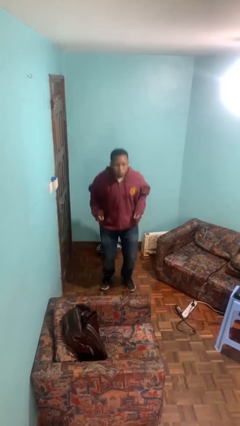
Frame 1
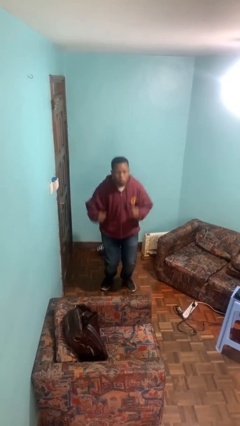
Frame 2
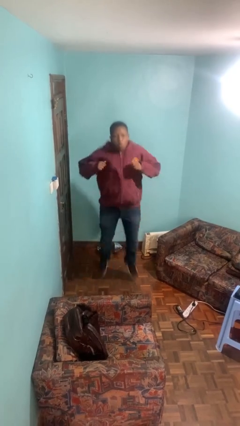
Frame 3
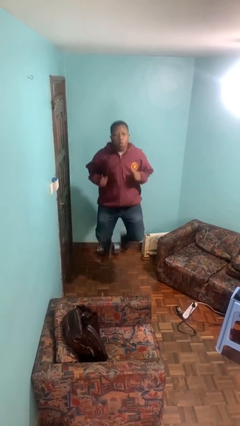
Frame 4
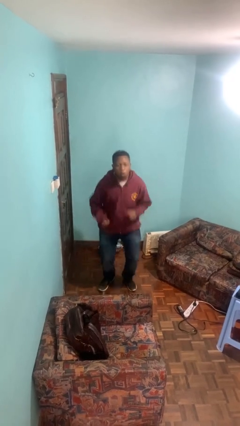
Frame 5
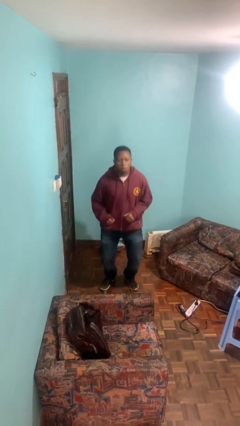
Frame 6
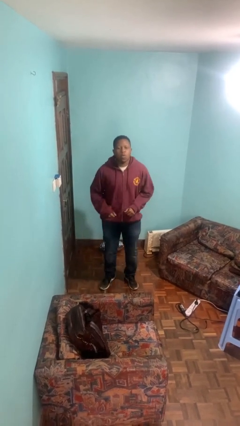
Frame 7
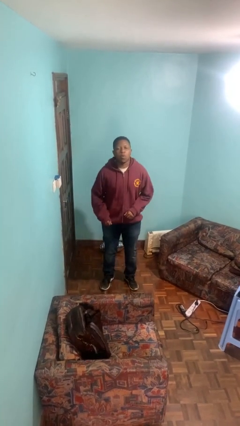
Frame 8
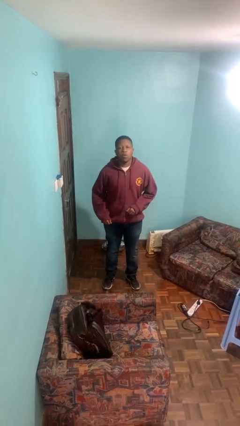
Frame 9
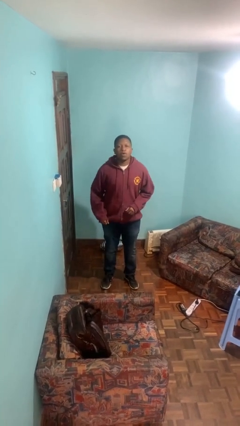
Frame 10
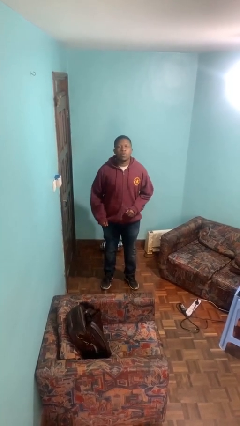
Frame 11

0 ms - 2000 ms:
person jumps

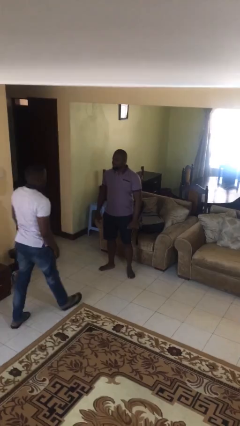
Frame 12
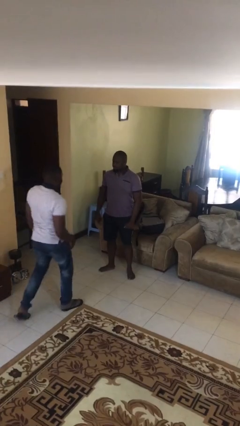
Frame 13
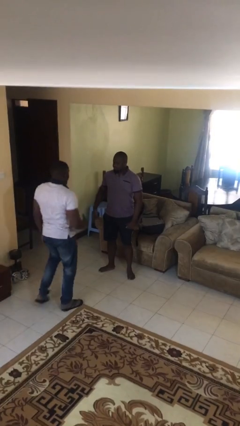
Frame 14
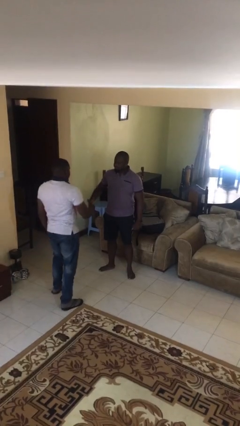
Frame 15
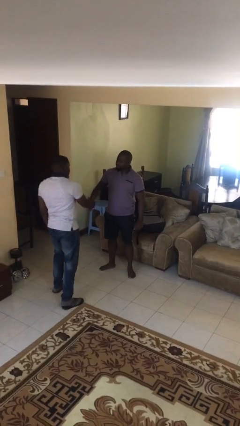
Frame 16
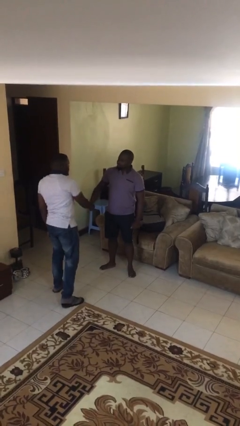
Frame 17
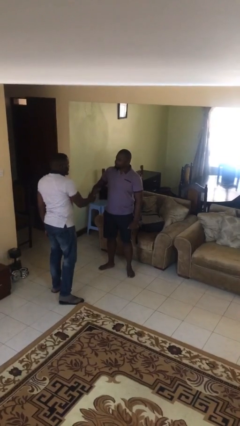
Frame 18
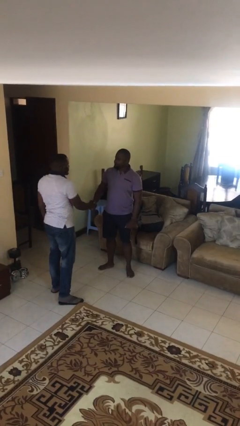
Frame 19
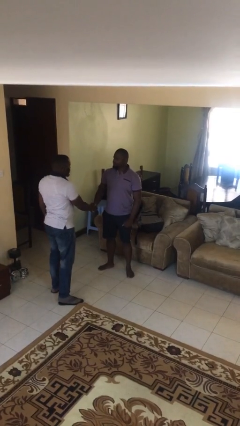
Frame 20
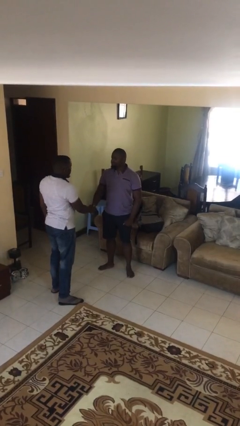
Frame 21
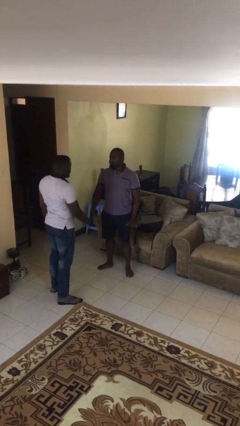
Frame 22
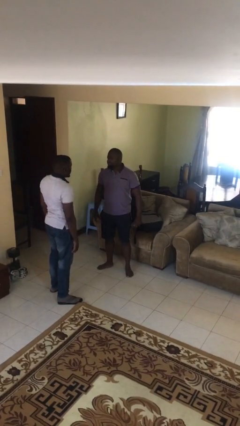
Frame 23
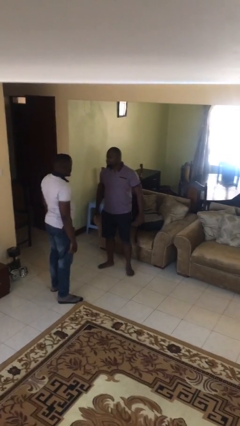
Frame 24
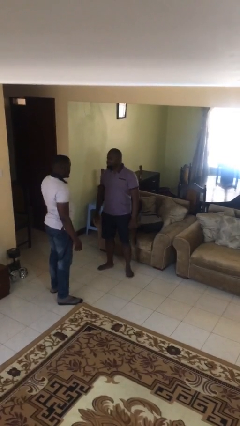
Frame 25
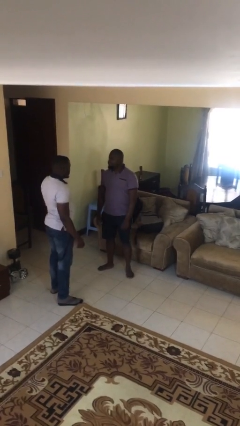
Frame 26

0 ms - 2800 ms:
person shakes hand

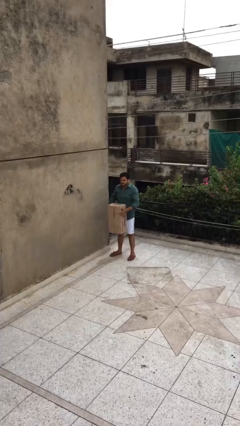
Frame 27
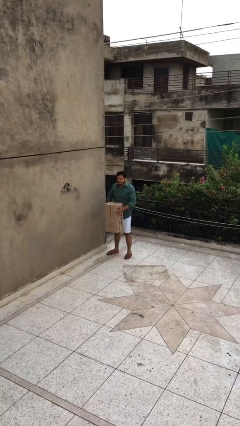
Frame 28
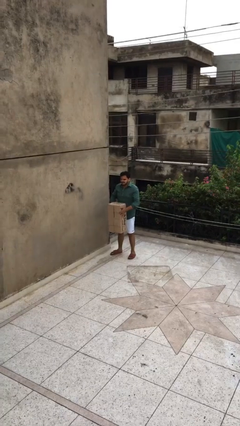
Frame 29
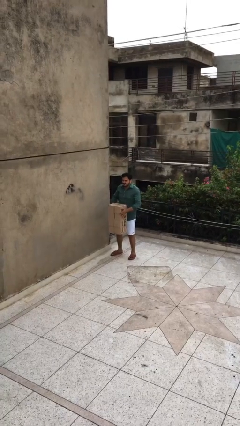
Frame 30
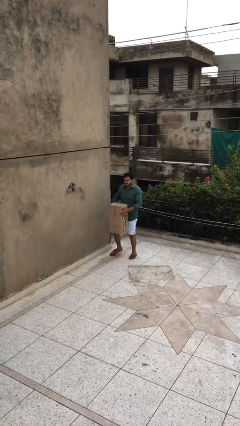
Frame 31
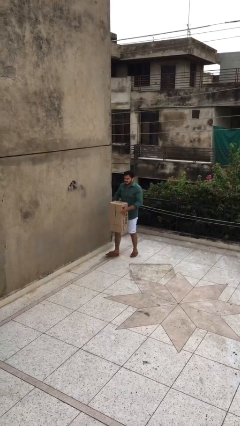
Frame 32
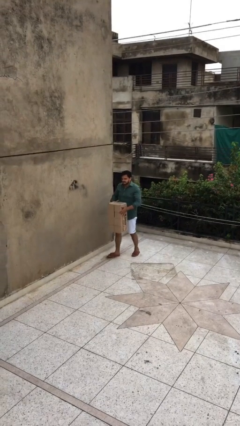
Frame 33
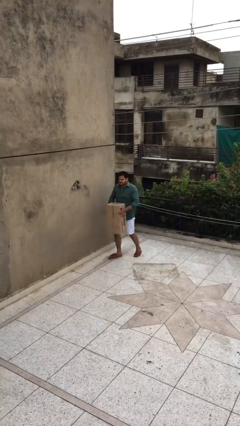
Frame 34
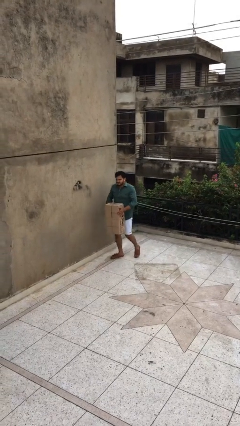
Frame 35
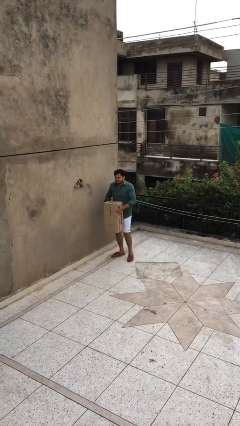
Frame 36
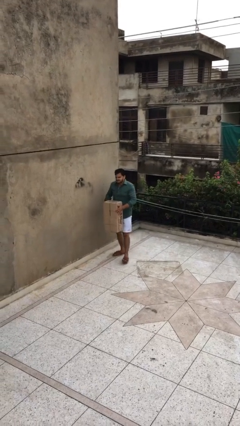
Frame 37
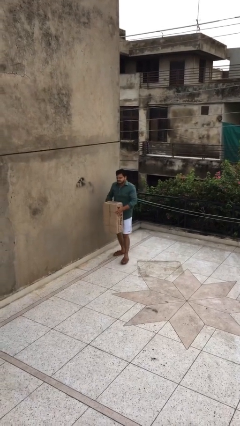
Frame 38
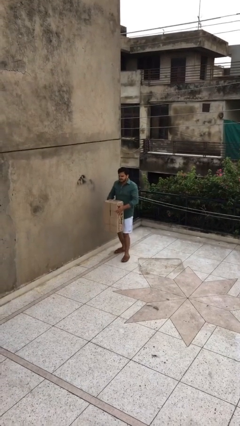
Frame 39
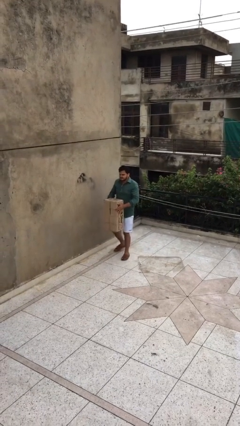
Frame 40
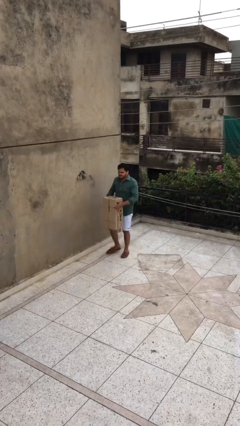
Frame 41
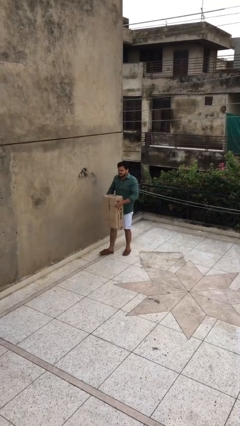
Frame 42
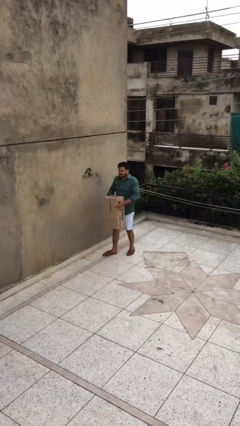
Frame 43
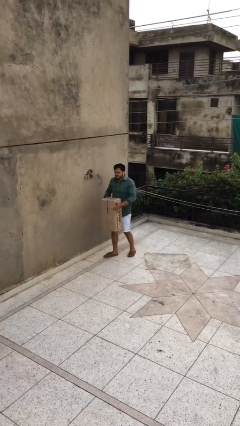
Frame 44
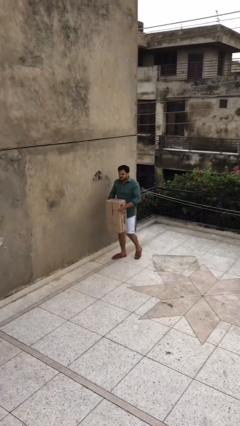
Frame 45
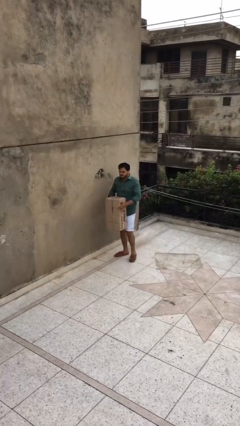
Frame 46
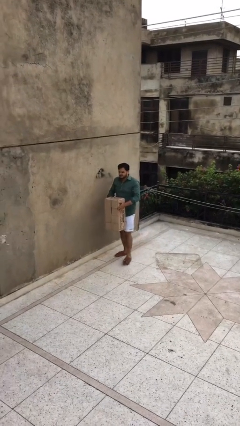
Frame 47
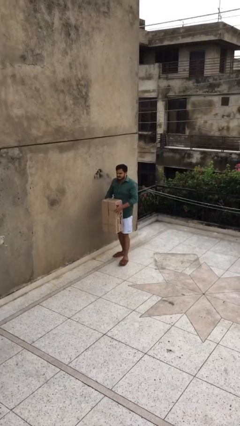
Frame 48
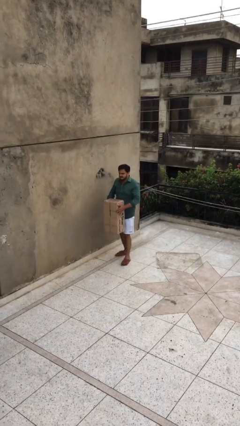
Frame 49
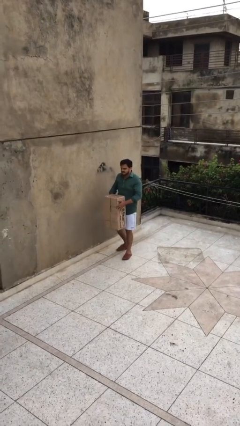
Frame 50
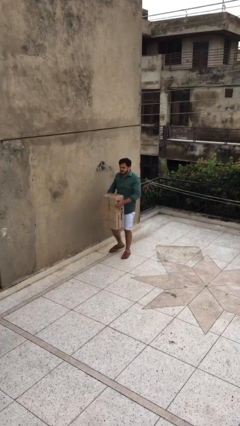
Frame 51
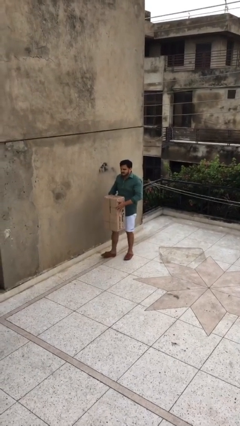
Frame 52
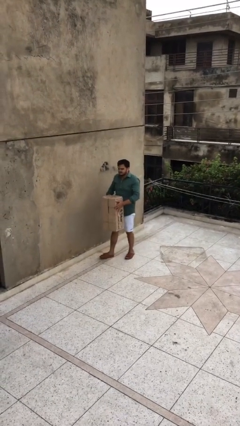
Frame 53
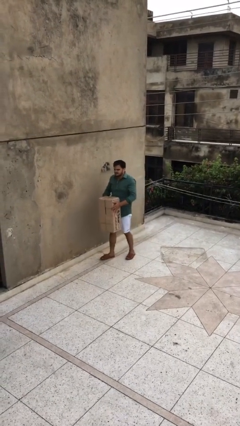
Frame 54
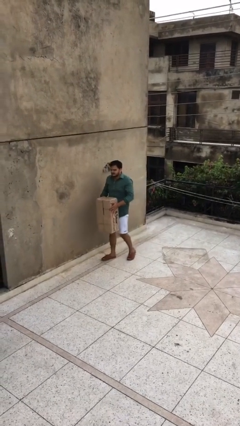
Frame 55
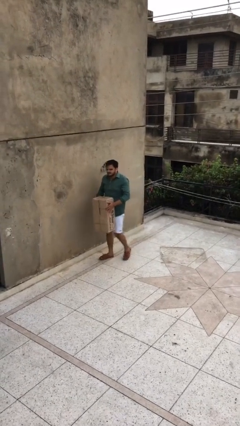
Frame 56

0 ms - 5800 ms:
person carries heavy object

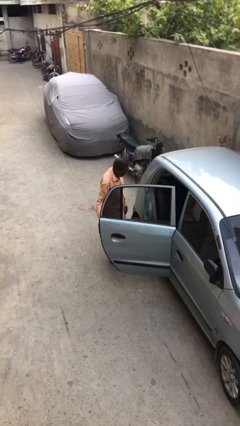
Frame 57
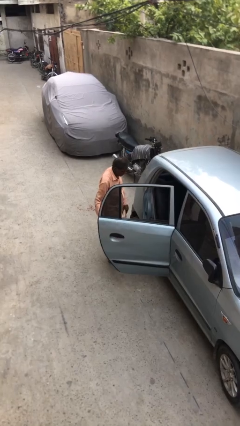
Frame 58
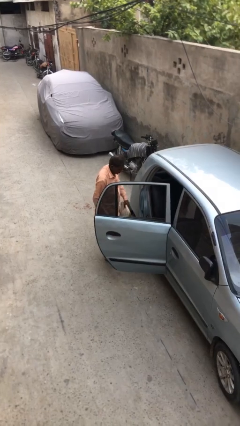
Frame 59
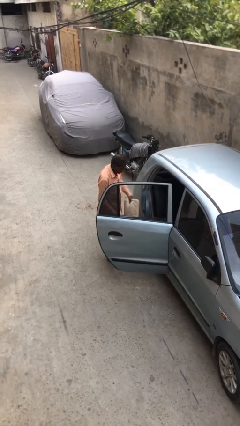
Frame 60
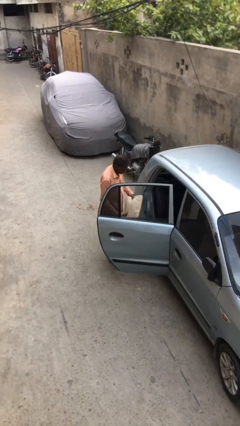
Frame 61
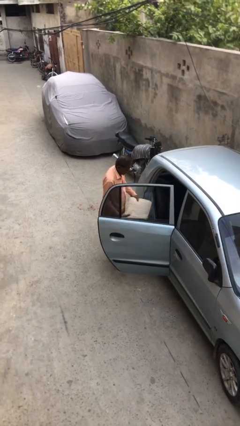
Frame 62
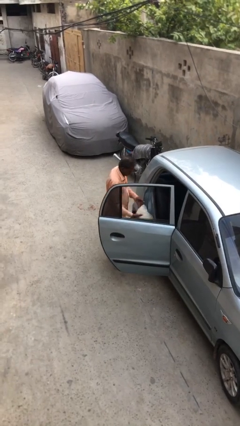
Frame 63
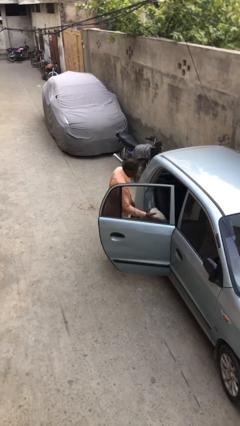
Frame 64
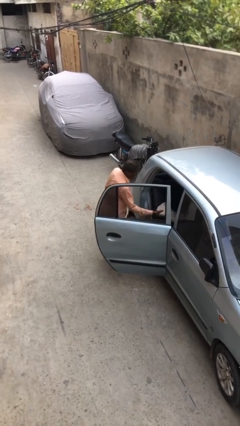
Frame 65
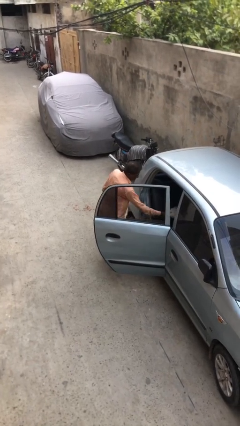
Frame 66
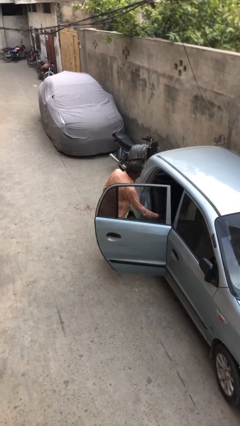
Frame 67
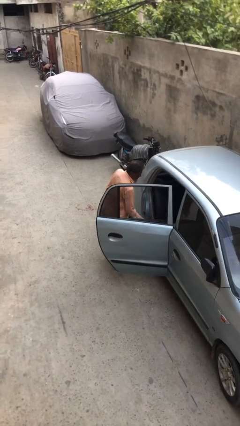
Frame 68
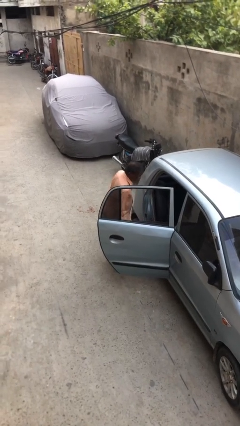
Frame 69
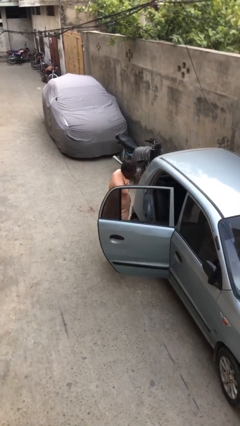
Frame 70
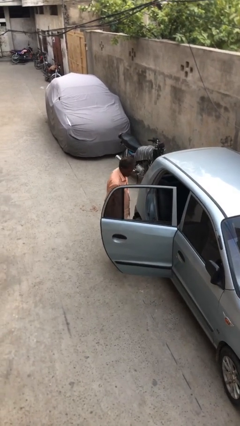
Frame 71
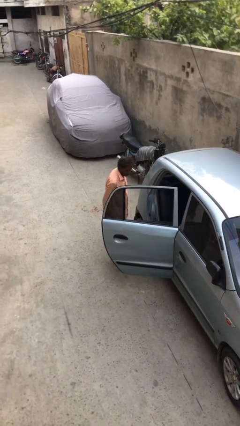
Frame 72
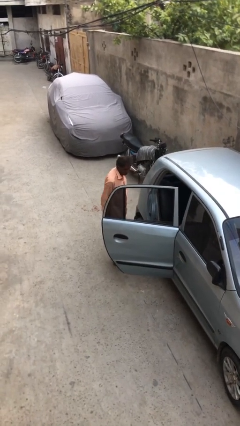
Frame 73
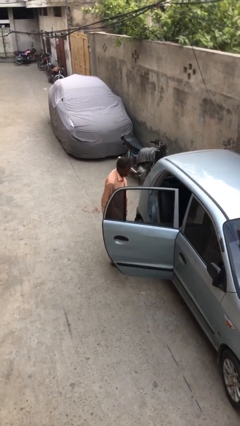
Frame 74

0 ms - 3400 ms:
person loads car

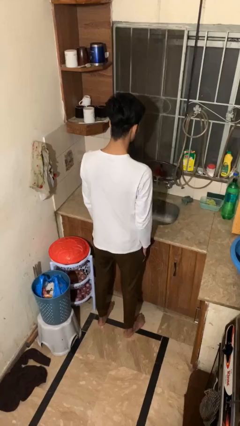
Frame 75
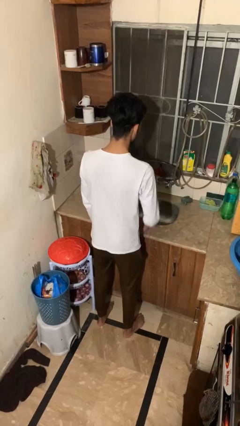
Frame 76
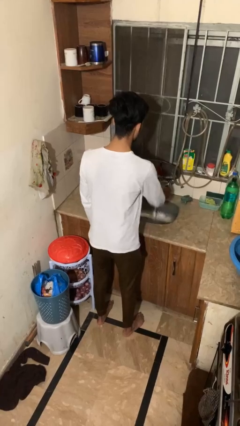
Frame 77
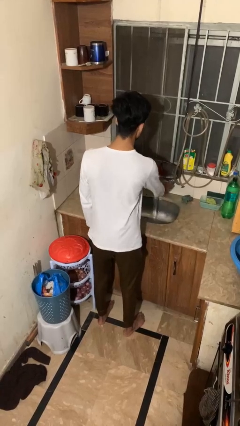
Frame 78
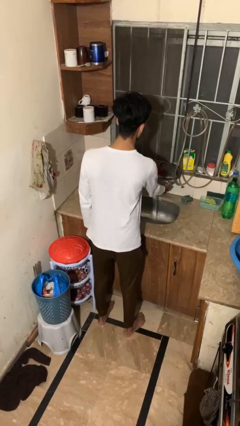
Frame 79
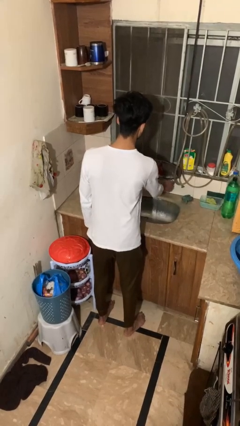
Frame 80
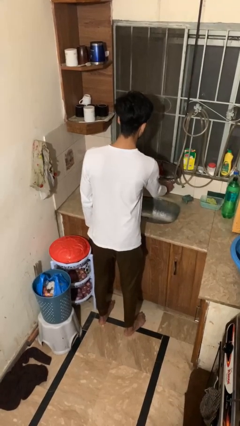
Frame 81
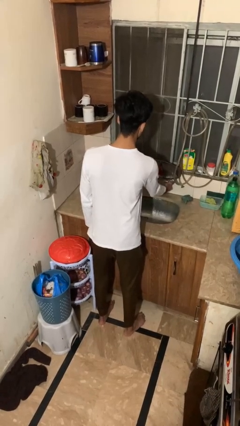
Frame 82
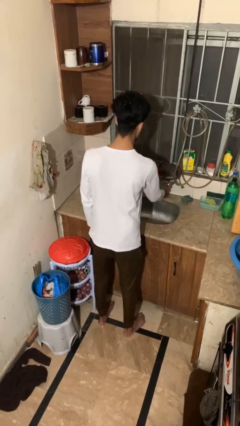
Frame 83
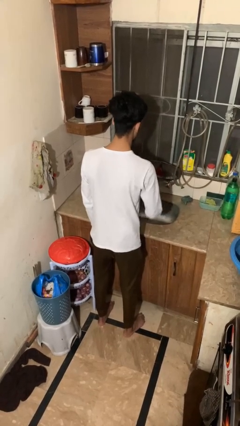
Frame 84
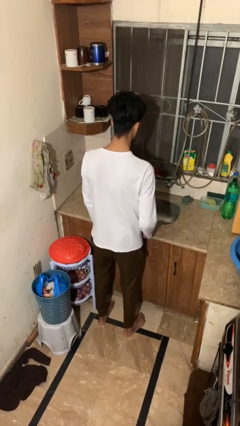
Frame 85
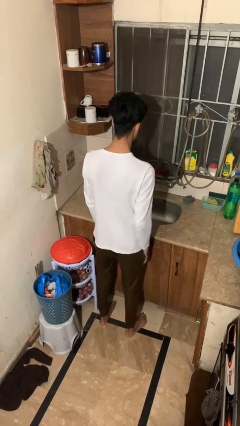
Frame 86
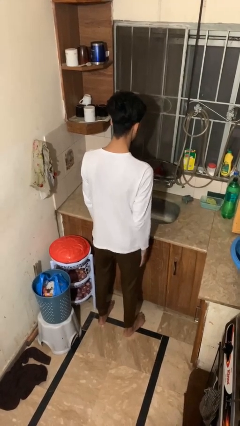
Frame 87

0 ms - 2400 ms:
person turns off faucet

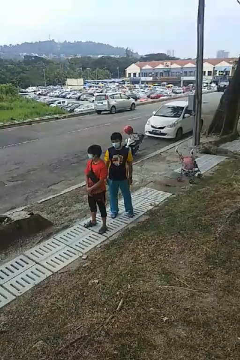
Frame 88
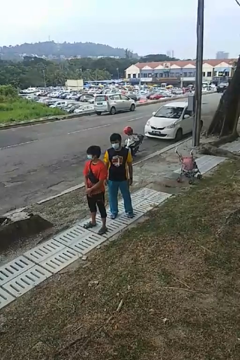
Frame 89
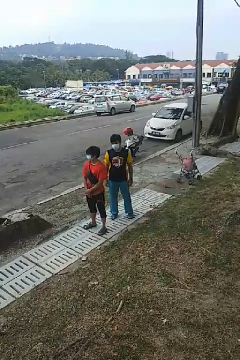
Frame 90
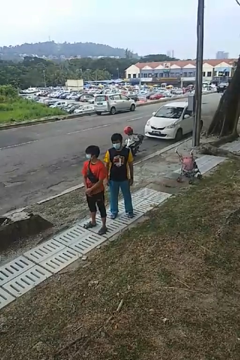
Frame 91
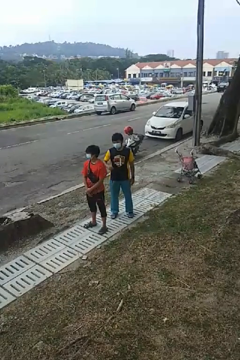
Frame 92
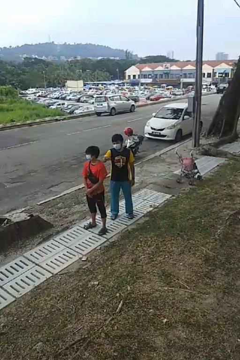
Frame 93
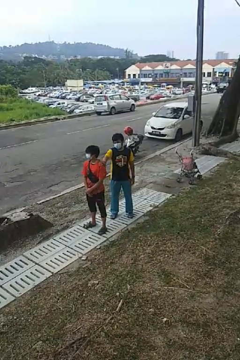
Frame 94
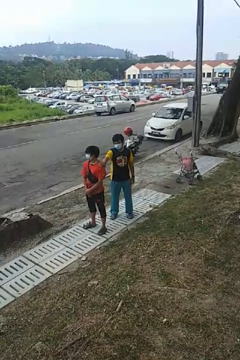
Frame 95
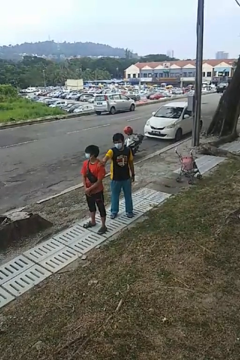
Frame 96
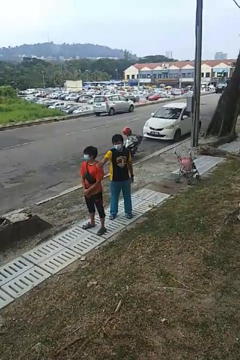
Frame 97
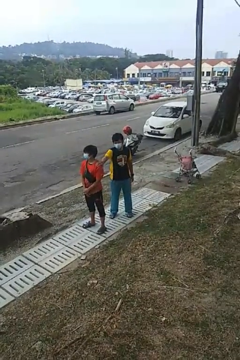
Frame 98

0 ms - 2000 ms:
person grabs person by shoulder
